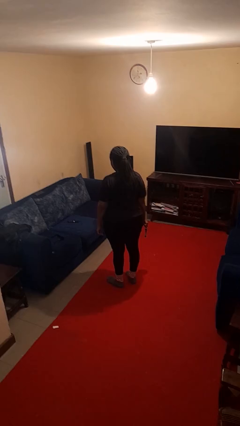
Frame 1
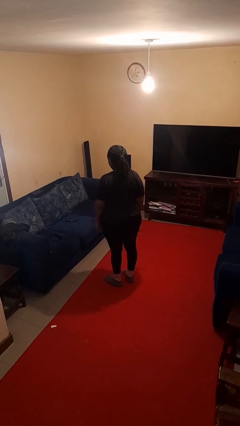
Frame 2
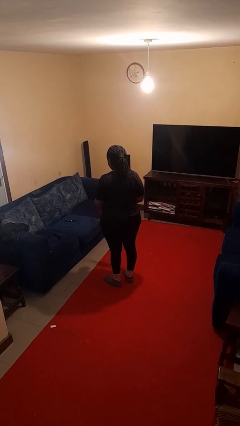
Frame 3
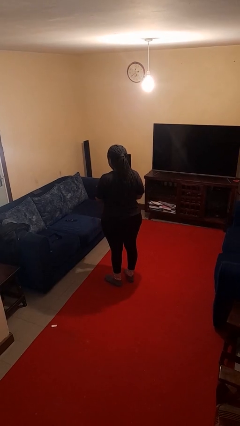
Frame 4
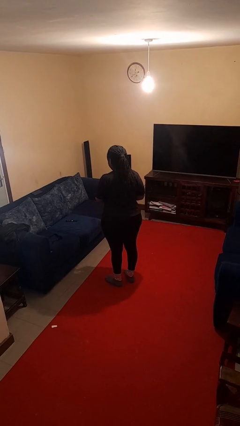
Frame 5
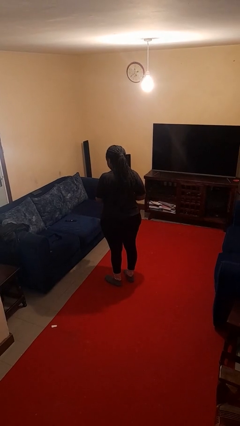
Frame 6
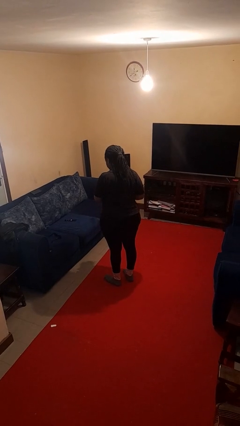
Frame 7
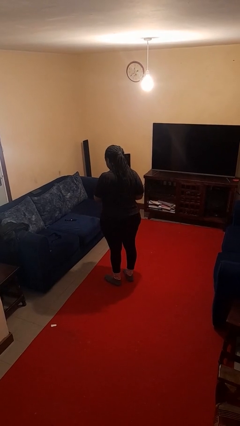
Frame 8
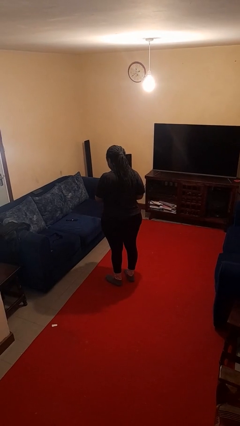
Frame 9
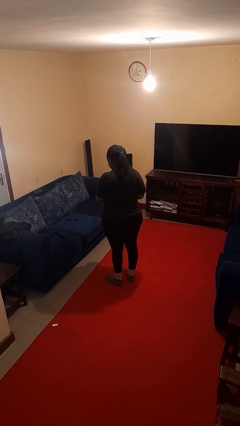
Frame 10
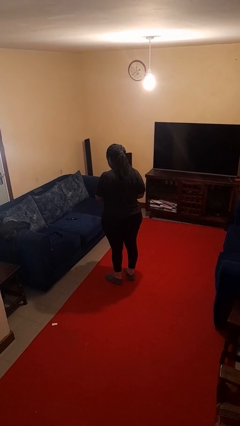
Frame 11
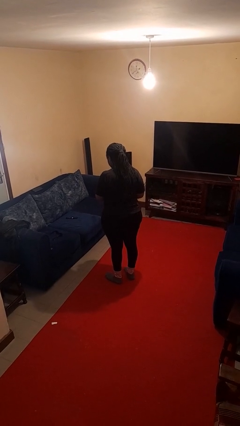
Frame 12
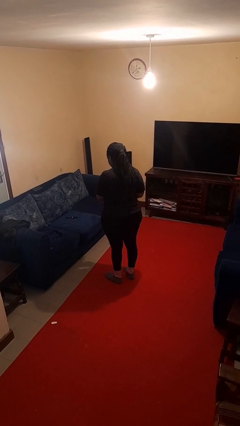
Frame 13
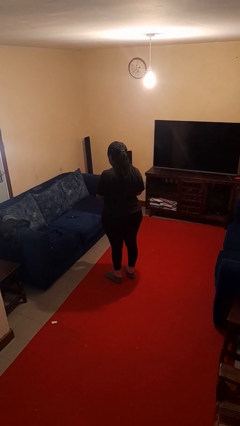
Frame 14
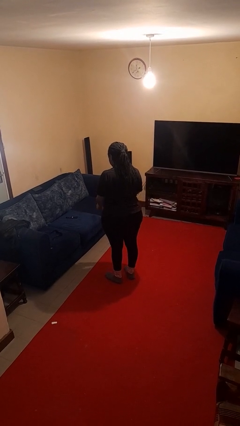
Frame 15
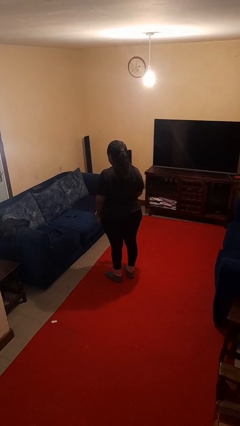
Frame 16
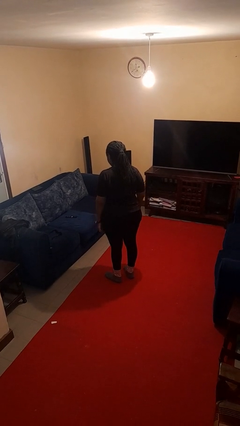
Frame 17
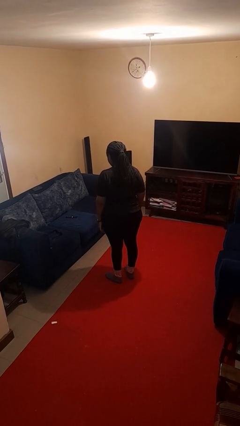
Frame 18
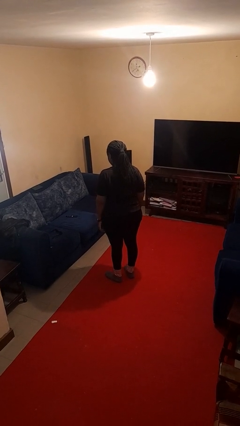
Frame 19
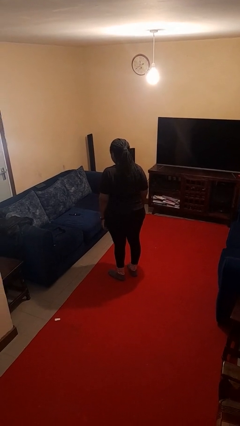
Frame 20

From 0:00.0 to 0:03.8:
person puts on wristwatch

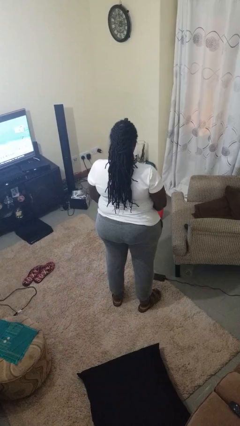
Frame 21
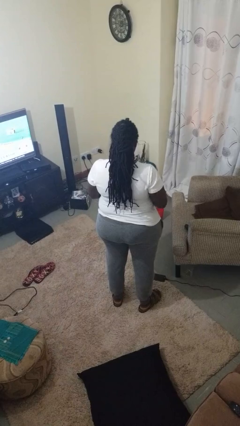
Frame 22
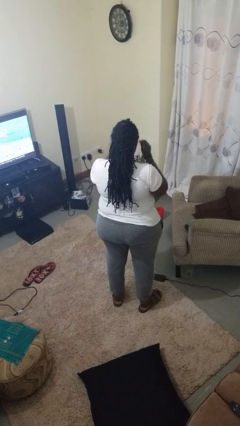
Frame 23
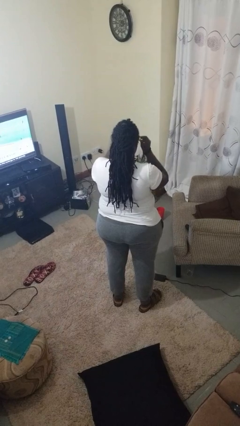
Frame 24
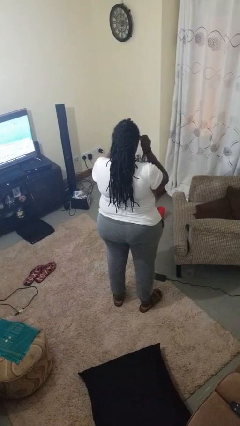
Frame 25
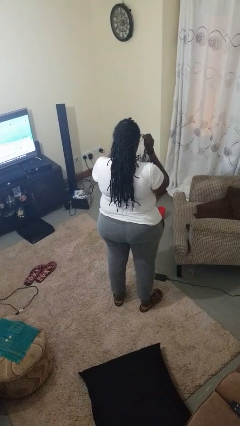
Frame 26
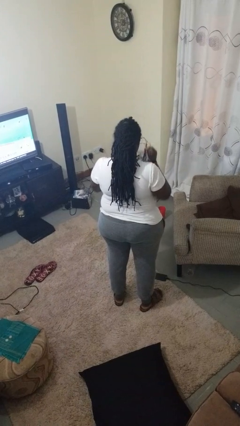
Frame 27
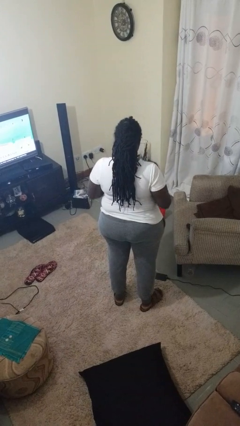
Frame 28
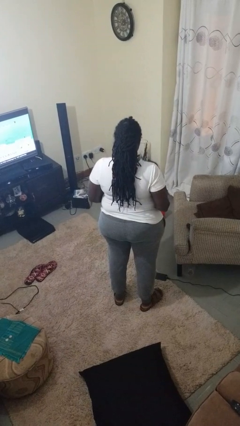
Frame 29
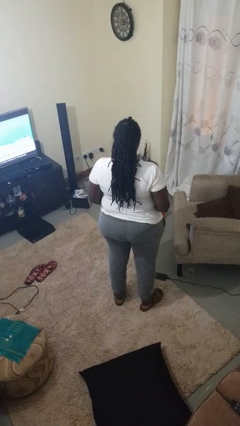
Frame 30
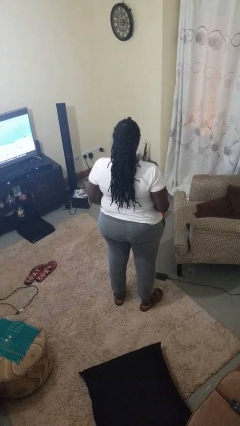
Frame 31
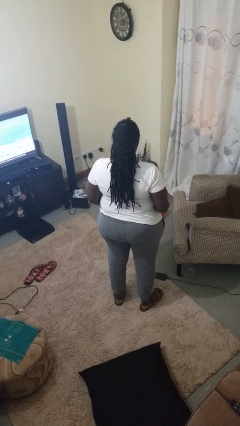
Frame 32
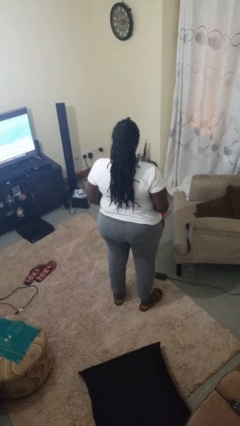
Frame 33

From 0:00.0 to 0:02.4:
person takes off sunglasses

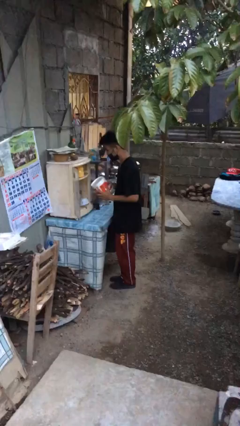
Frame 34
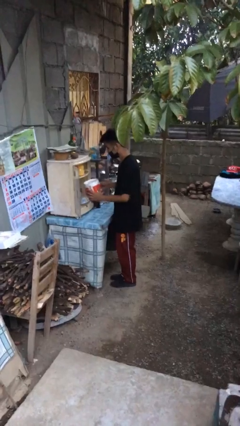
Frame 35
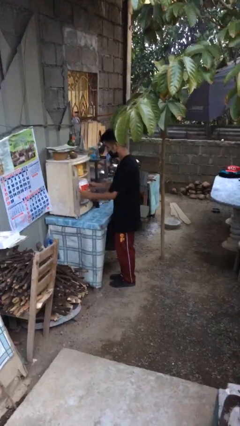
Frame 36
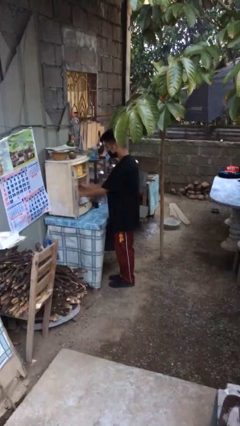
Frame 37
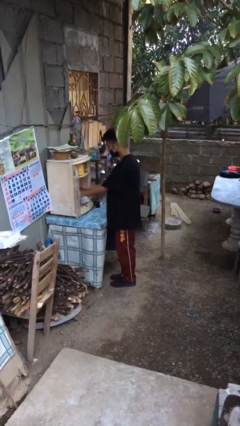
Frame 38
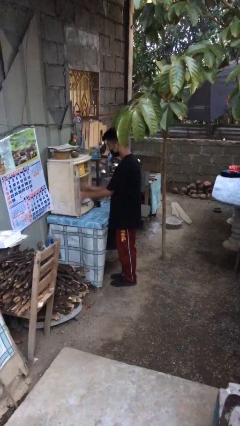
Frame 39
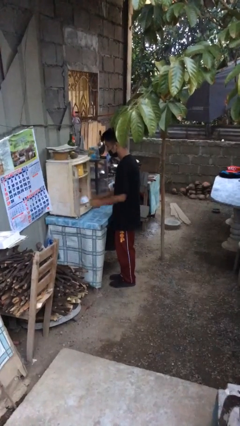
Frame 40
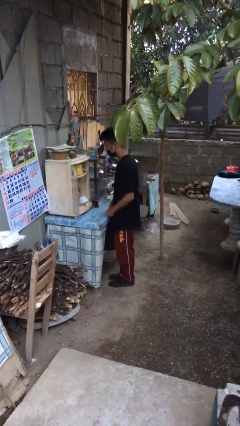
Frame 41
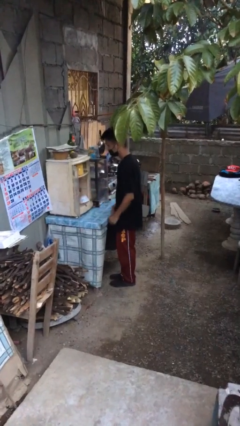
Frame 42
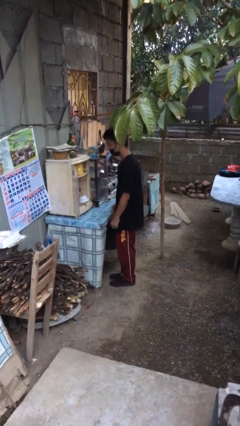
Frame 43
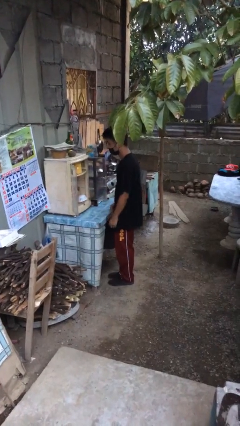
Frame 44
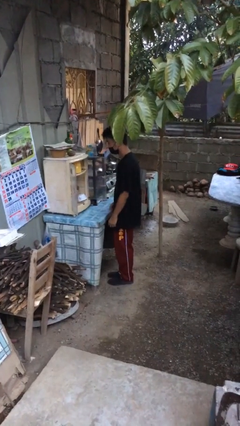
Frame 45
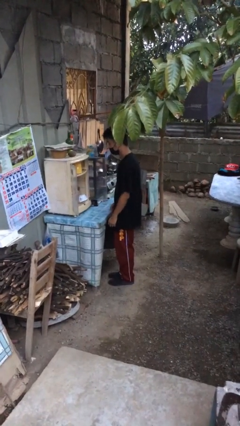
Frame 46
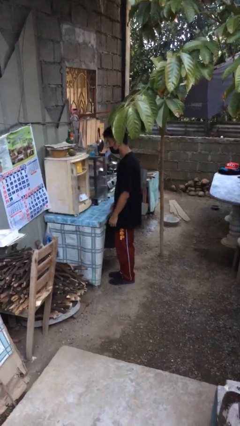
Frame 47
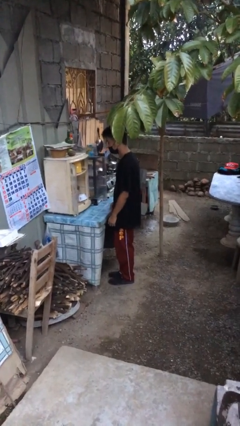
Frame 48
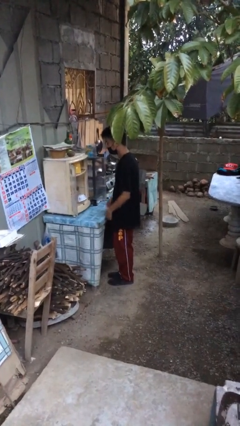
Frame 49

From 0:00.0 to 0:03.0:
person puts down object into cabinet

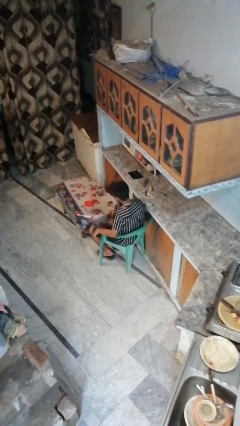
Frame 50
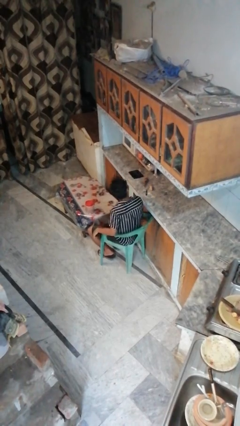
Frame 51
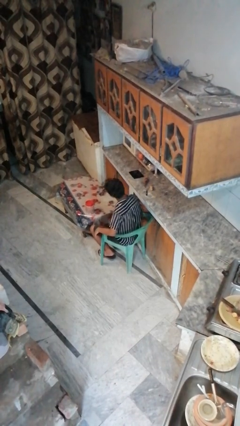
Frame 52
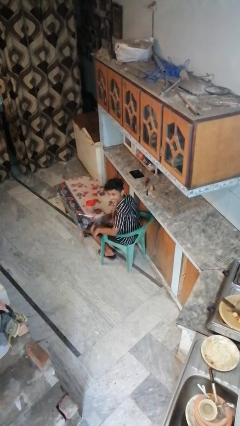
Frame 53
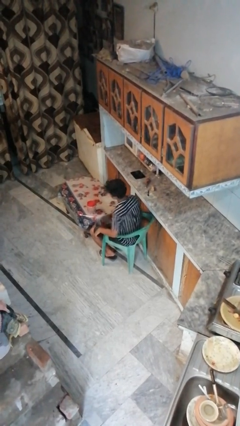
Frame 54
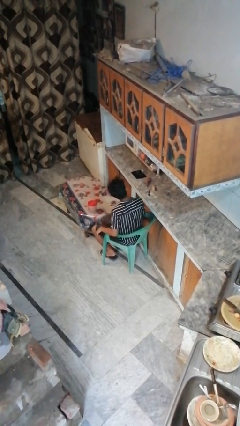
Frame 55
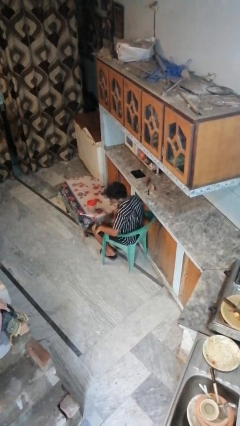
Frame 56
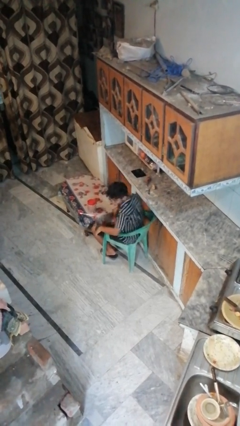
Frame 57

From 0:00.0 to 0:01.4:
person shakes head

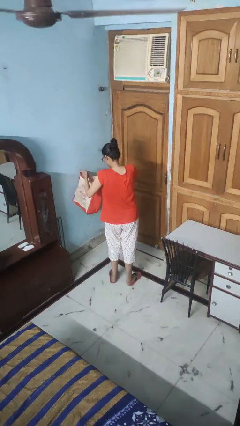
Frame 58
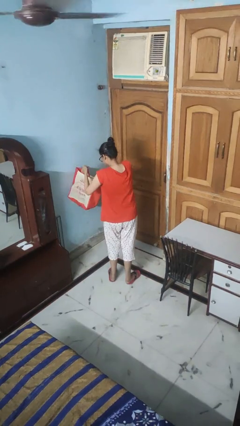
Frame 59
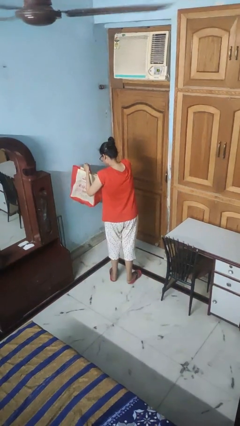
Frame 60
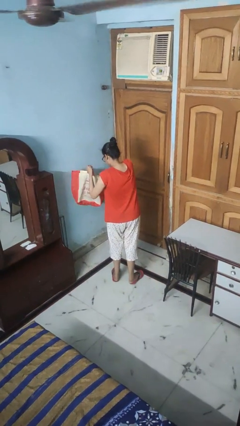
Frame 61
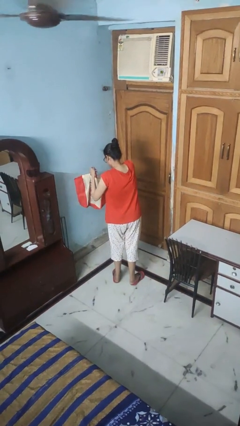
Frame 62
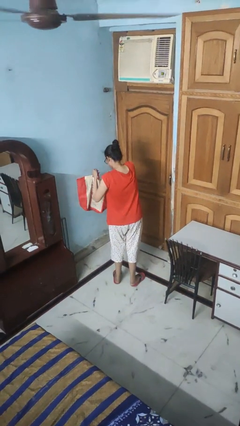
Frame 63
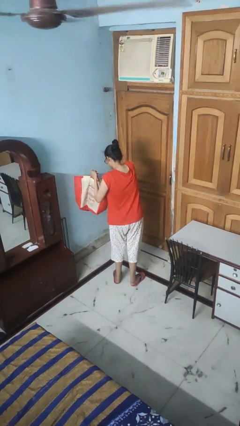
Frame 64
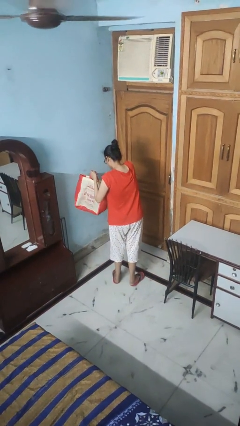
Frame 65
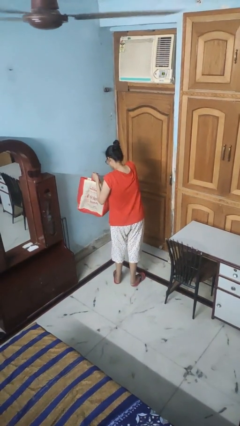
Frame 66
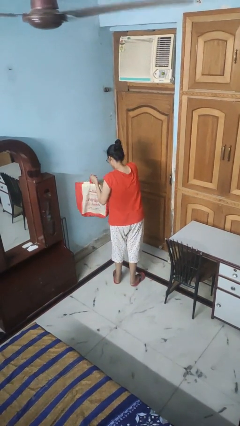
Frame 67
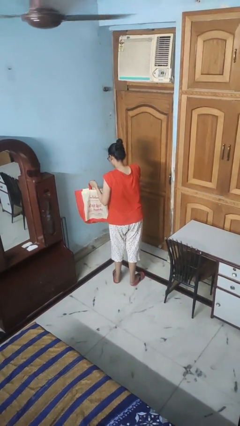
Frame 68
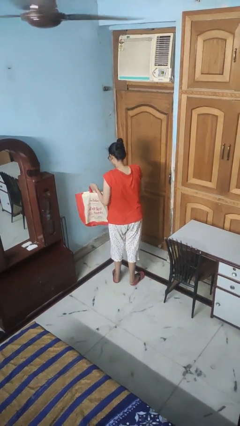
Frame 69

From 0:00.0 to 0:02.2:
person searches in bag

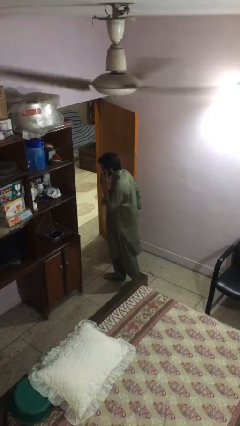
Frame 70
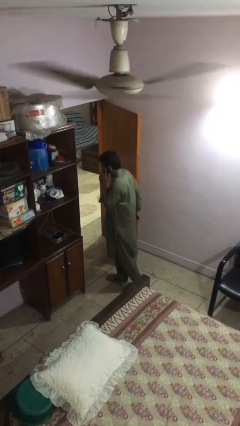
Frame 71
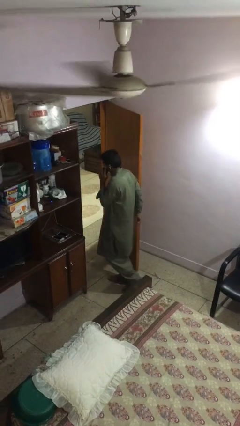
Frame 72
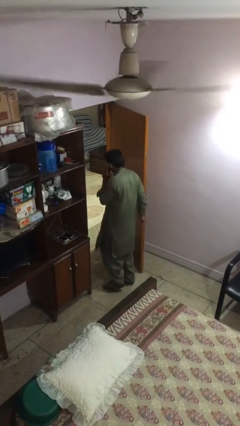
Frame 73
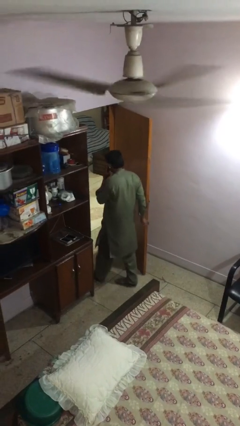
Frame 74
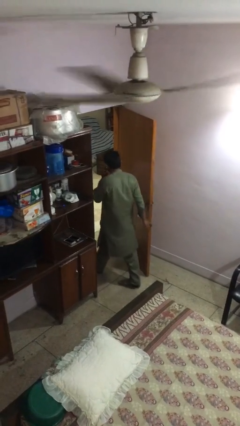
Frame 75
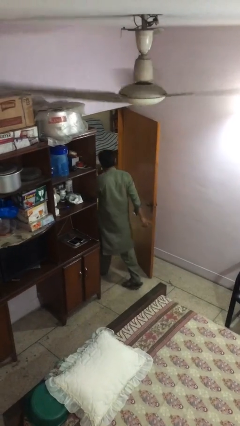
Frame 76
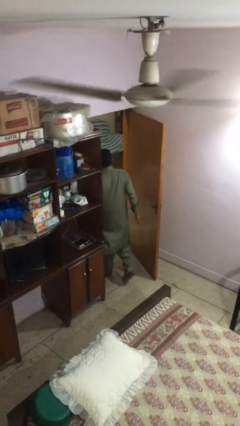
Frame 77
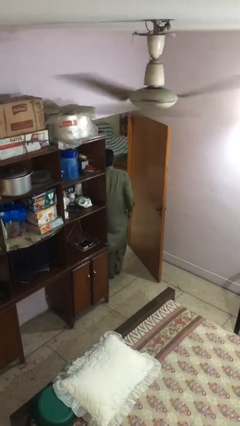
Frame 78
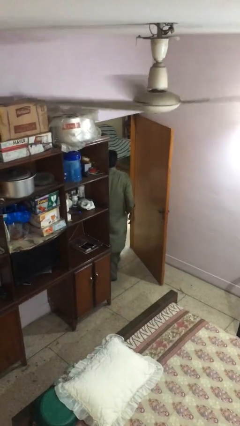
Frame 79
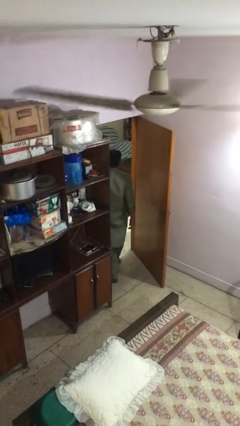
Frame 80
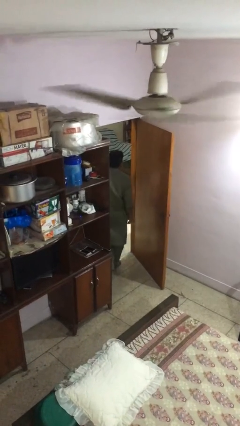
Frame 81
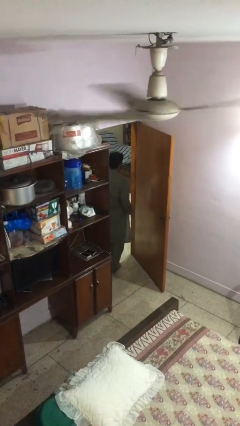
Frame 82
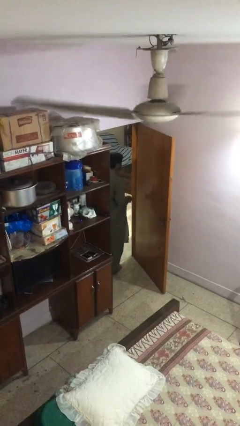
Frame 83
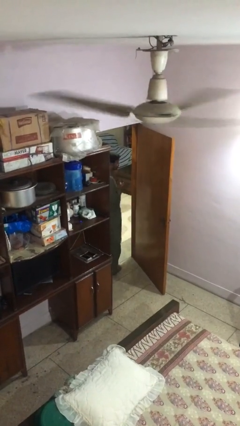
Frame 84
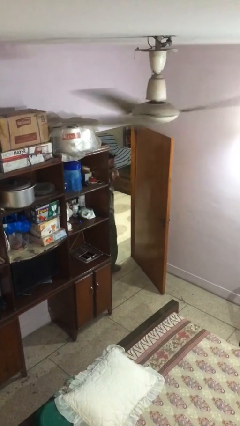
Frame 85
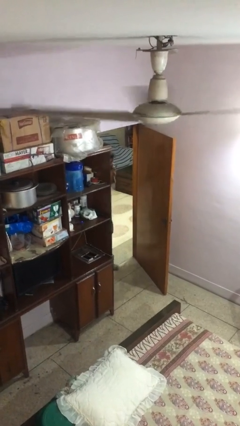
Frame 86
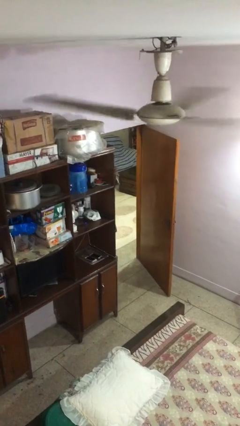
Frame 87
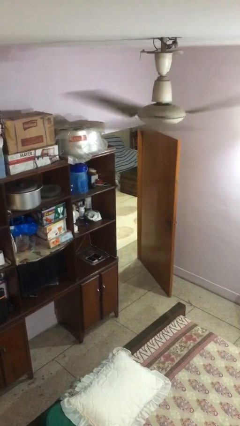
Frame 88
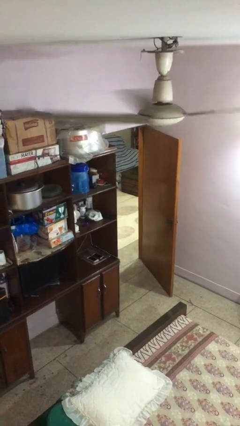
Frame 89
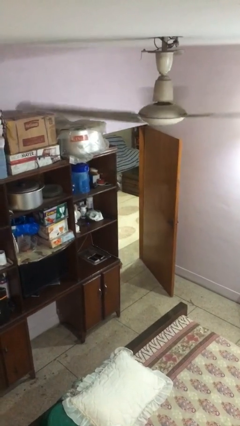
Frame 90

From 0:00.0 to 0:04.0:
person exits scene through structure

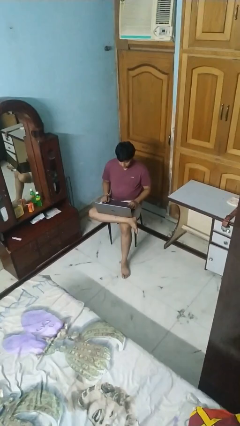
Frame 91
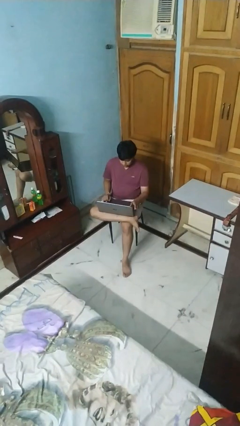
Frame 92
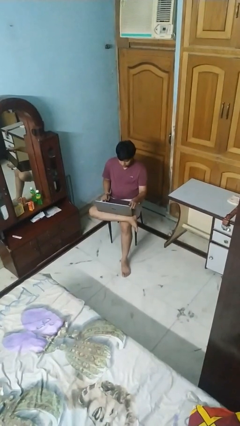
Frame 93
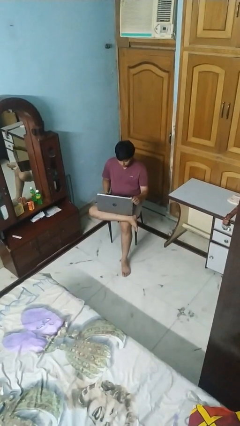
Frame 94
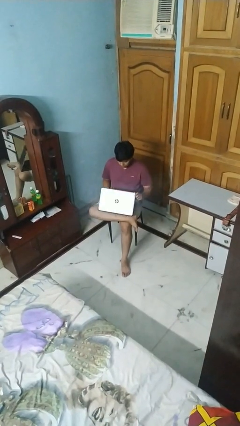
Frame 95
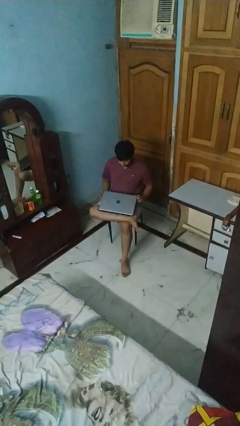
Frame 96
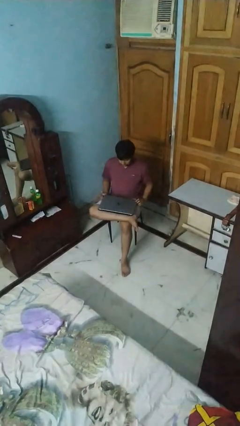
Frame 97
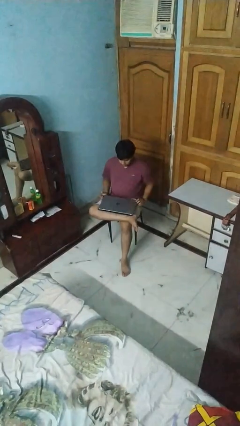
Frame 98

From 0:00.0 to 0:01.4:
person closes laptop
